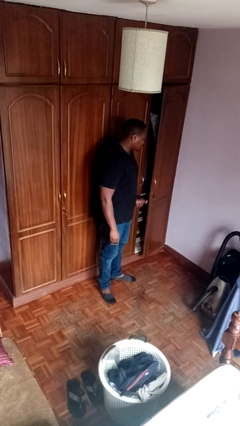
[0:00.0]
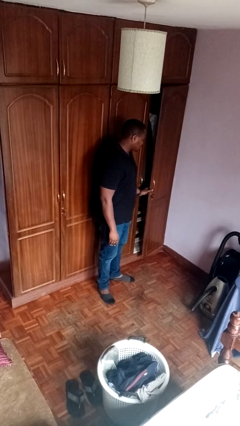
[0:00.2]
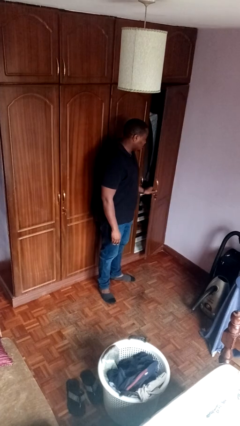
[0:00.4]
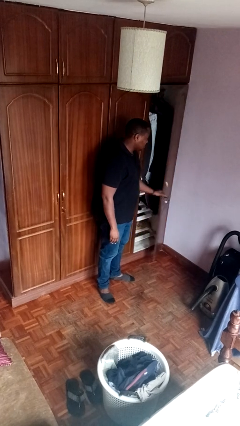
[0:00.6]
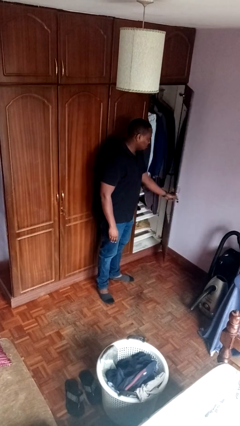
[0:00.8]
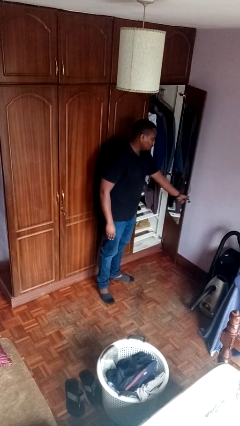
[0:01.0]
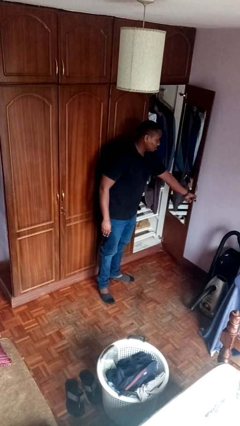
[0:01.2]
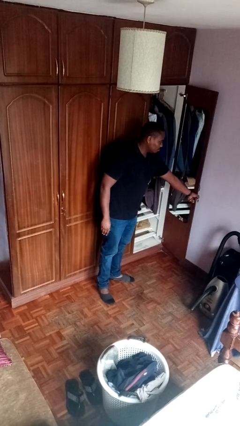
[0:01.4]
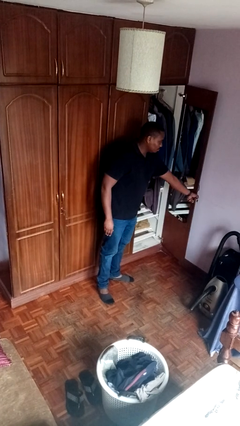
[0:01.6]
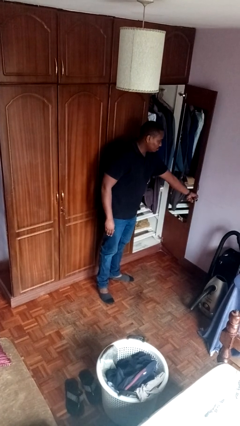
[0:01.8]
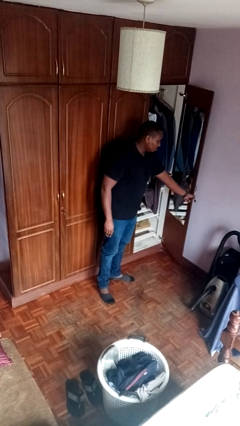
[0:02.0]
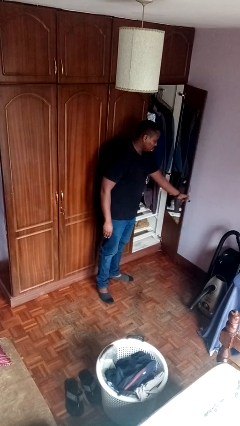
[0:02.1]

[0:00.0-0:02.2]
person opens closet door

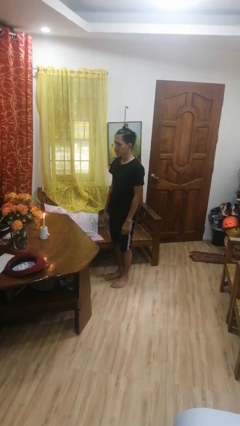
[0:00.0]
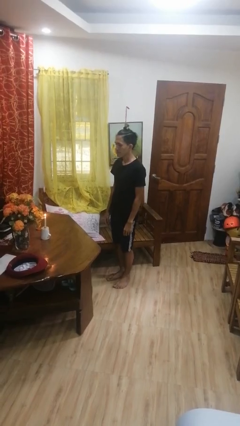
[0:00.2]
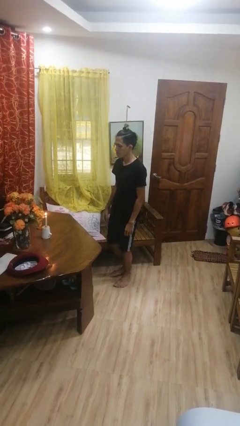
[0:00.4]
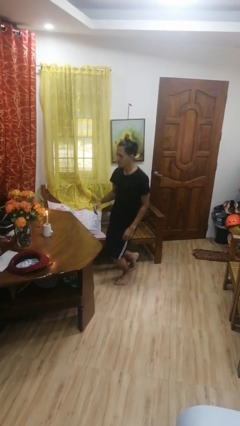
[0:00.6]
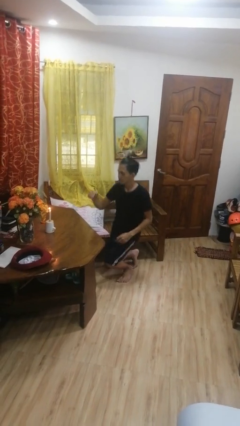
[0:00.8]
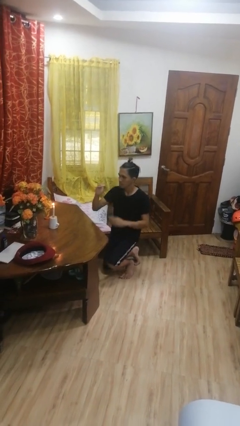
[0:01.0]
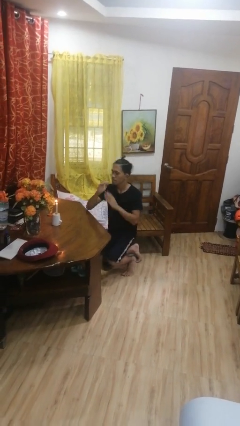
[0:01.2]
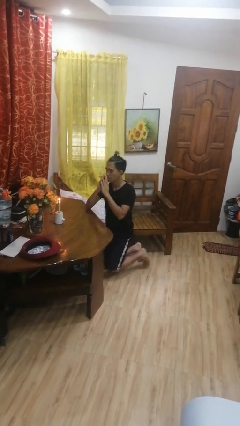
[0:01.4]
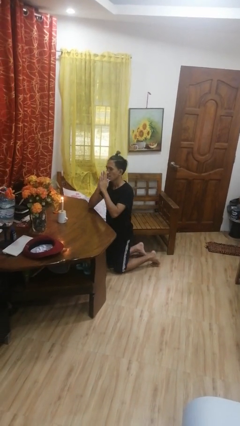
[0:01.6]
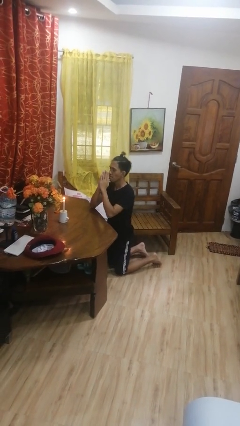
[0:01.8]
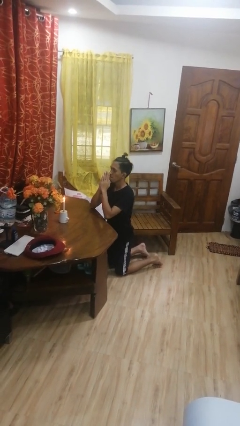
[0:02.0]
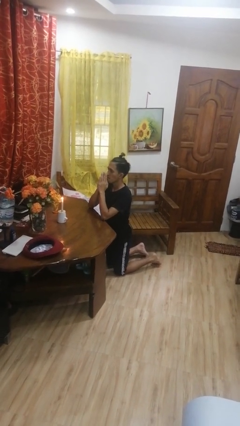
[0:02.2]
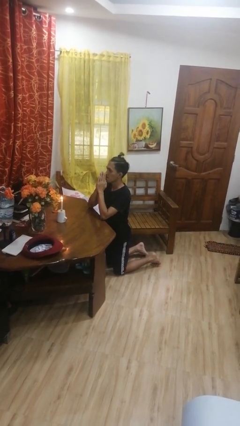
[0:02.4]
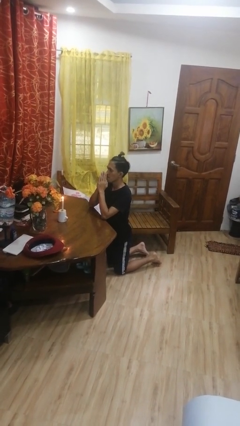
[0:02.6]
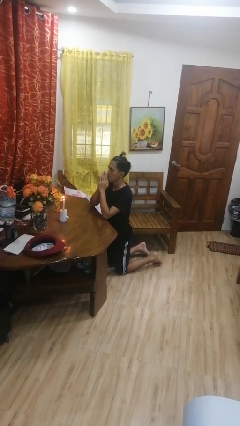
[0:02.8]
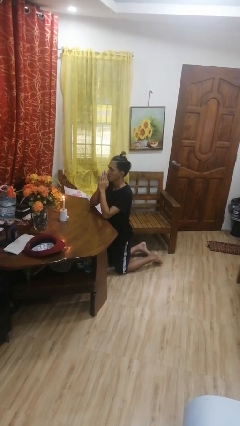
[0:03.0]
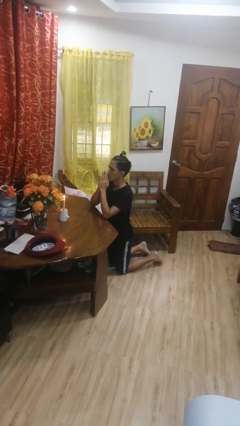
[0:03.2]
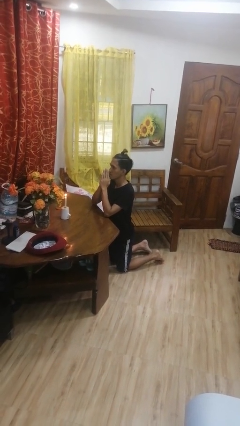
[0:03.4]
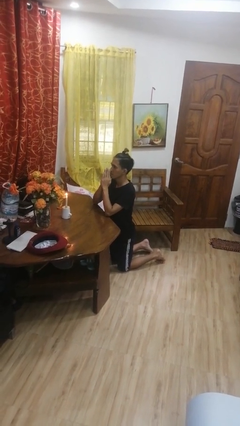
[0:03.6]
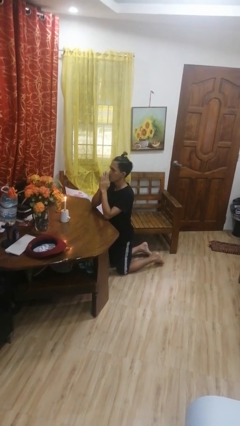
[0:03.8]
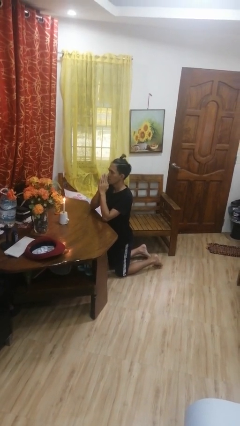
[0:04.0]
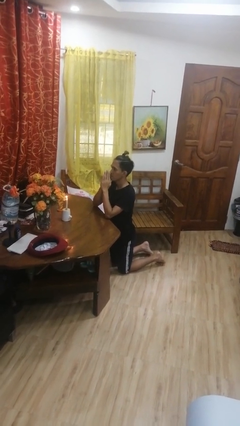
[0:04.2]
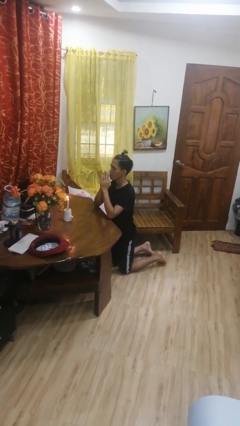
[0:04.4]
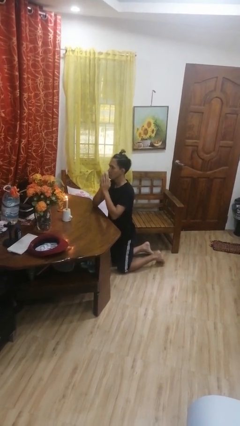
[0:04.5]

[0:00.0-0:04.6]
person prays

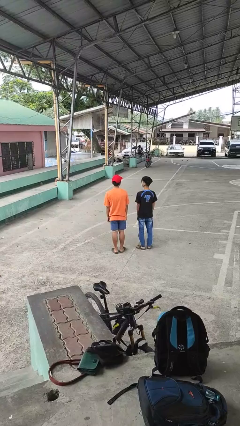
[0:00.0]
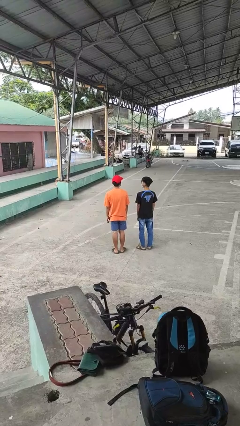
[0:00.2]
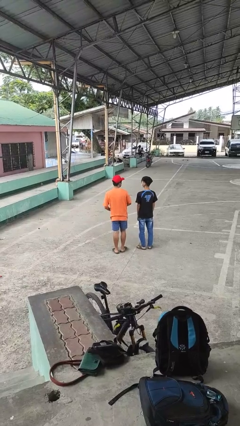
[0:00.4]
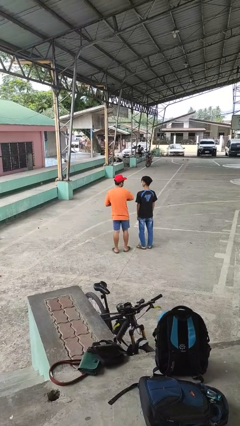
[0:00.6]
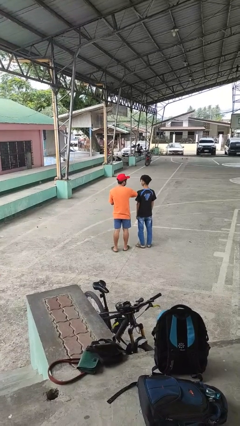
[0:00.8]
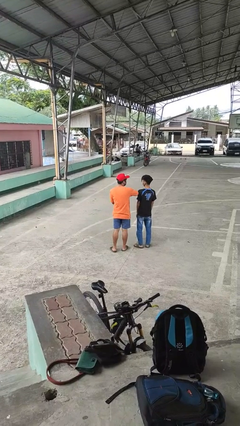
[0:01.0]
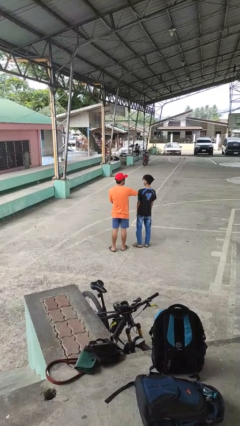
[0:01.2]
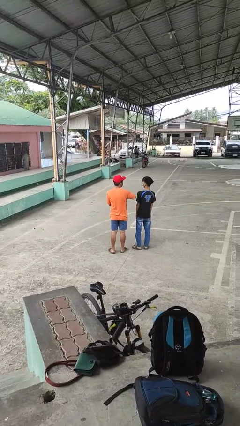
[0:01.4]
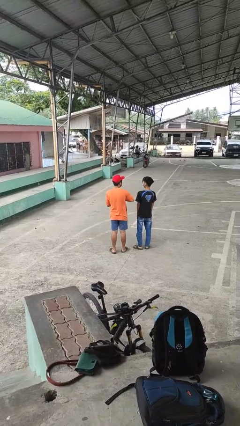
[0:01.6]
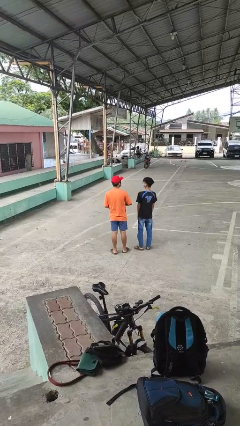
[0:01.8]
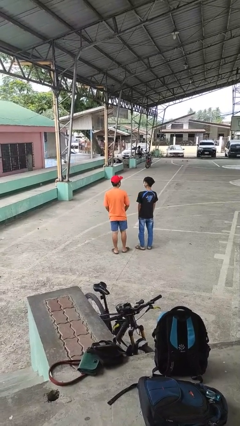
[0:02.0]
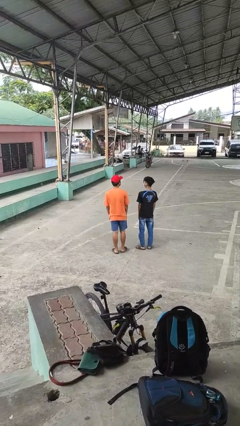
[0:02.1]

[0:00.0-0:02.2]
person nudges person with elbow

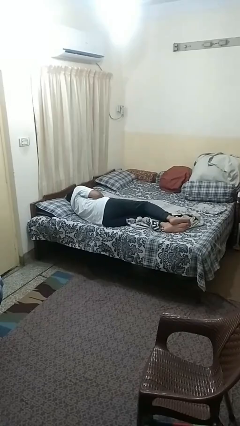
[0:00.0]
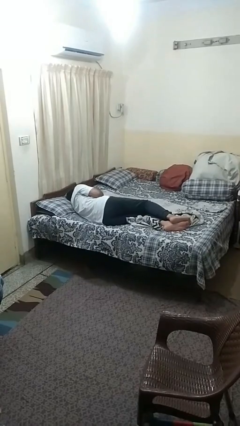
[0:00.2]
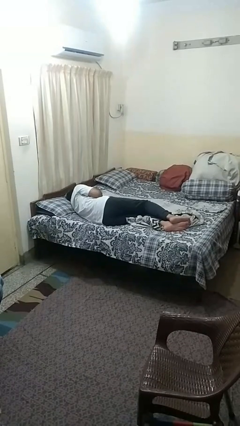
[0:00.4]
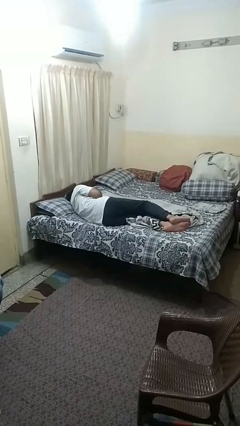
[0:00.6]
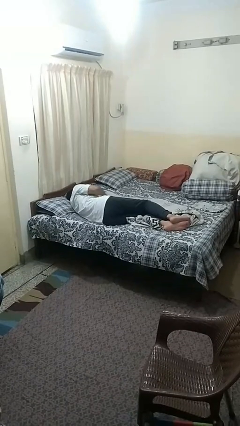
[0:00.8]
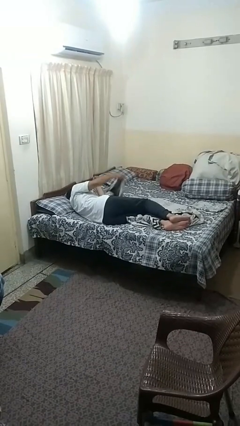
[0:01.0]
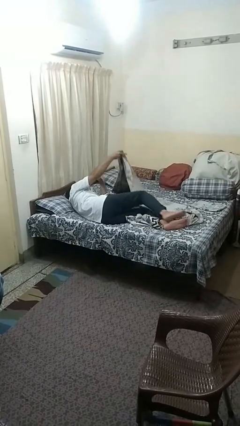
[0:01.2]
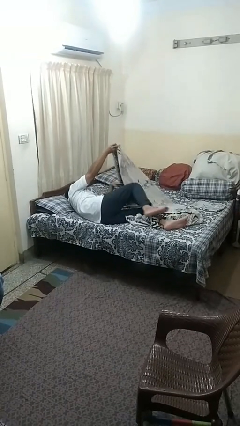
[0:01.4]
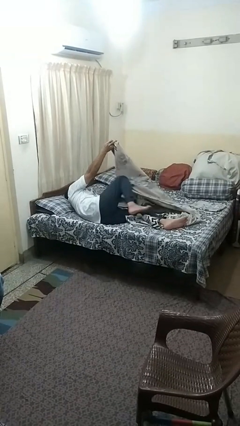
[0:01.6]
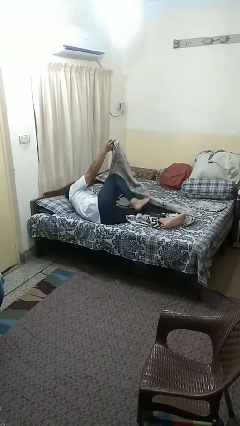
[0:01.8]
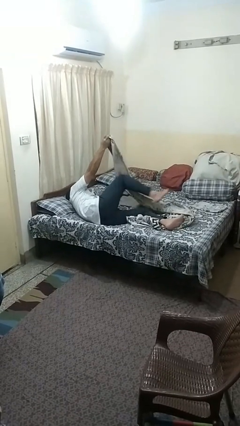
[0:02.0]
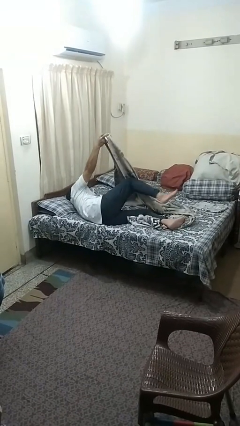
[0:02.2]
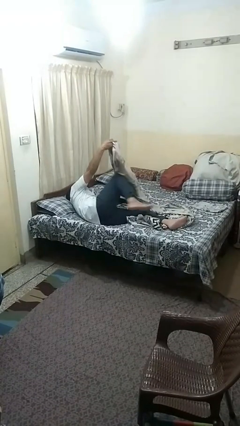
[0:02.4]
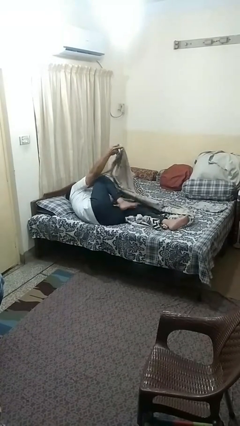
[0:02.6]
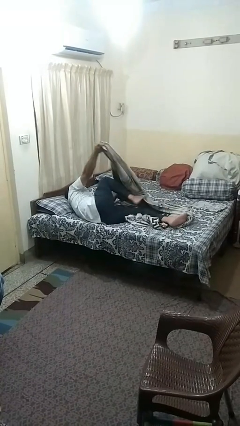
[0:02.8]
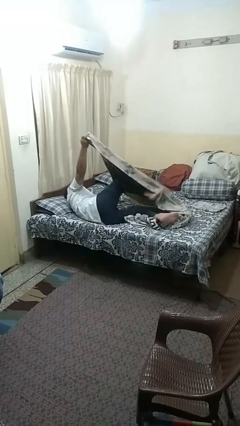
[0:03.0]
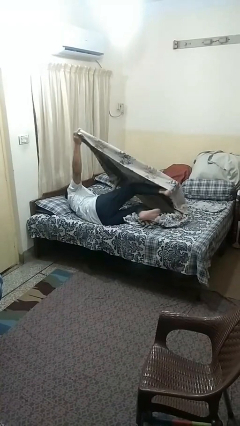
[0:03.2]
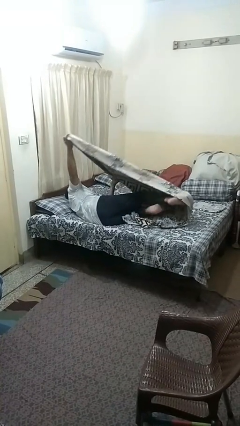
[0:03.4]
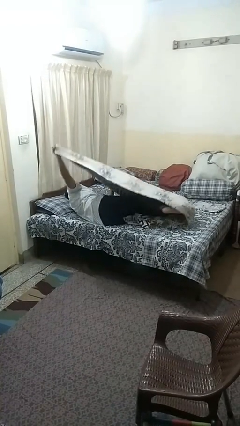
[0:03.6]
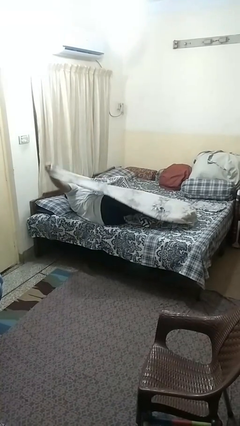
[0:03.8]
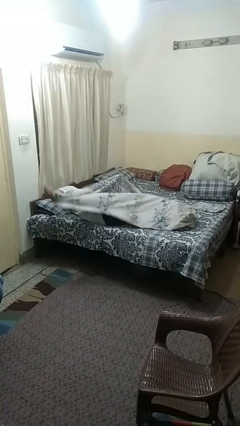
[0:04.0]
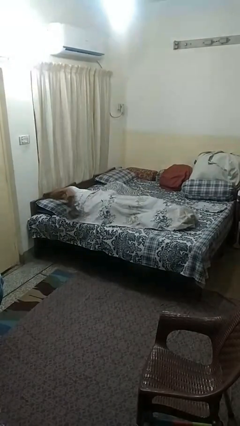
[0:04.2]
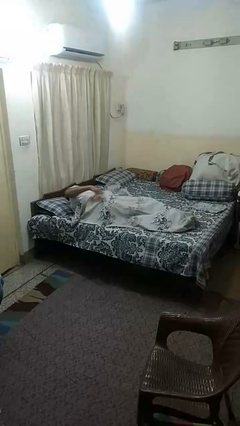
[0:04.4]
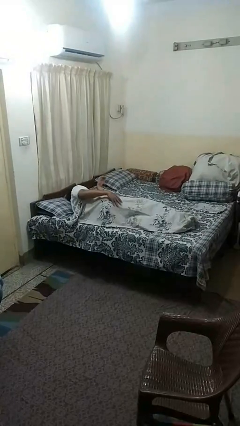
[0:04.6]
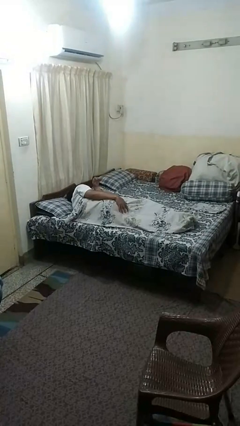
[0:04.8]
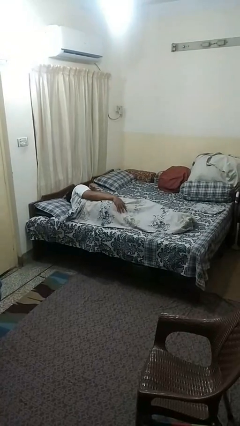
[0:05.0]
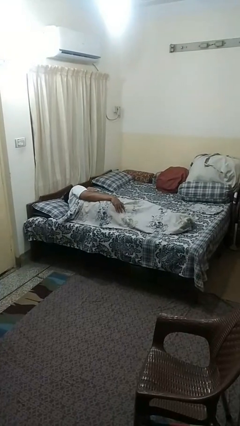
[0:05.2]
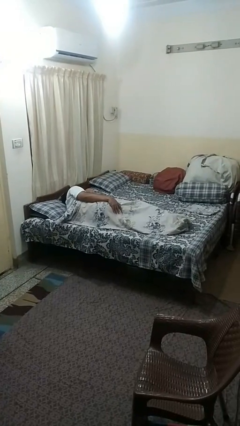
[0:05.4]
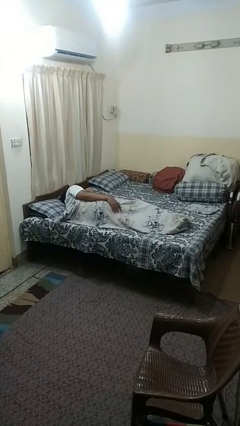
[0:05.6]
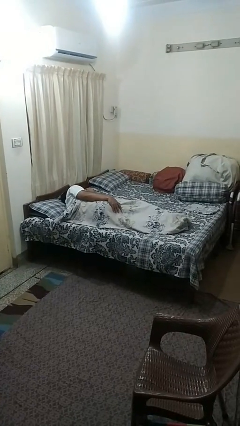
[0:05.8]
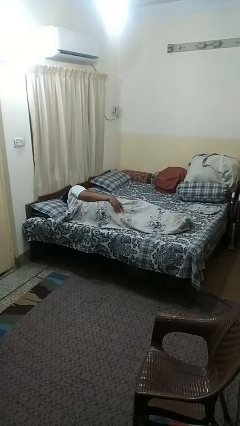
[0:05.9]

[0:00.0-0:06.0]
person covers with bedsheets

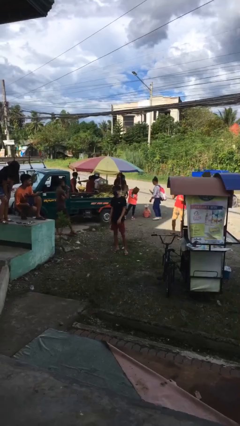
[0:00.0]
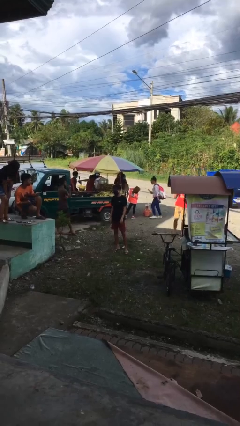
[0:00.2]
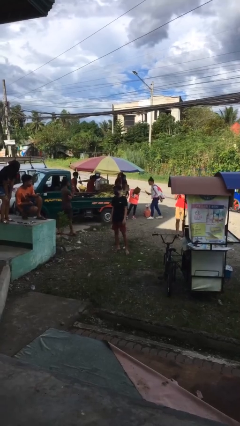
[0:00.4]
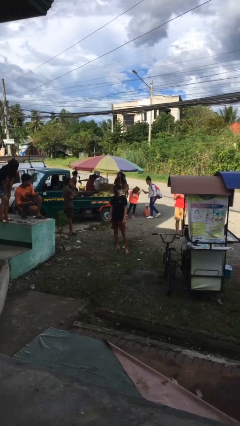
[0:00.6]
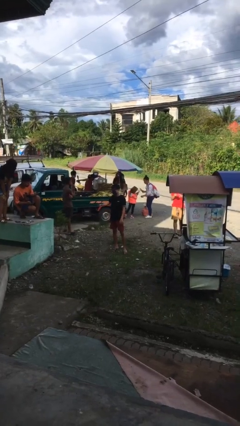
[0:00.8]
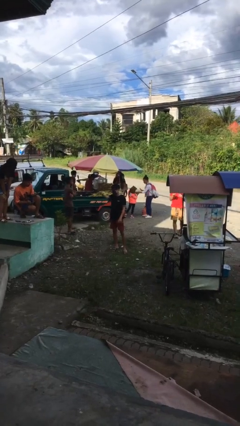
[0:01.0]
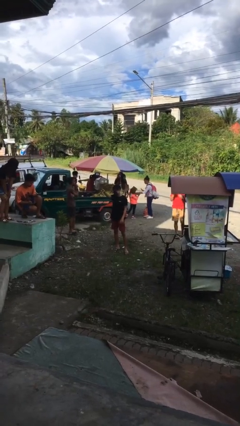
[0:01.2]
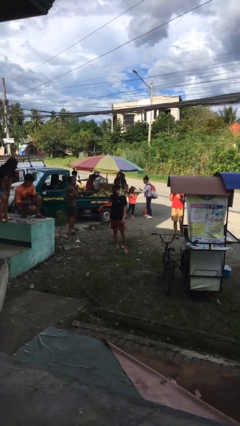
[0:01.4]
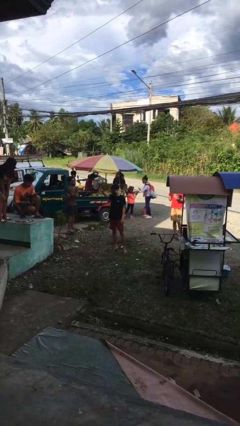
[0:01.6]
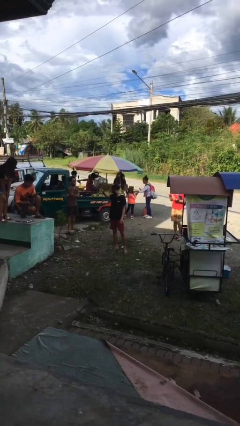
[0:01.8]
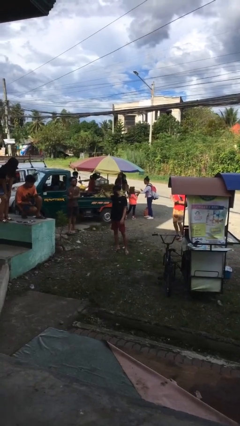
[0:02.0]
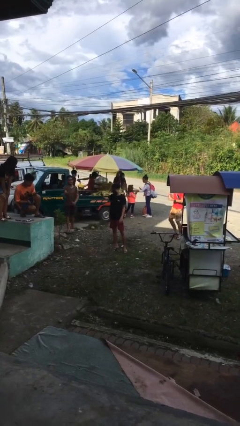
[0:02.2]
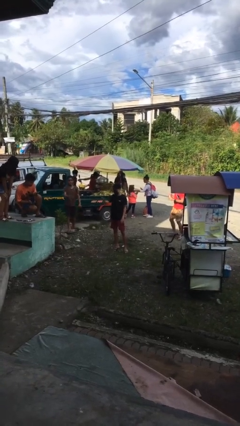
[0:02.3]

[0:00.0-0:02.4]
person points at person

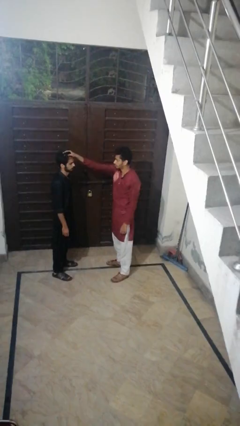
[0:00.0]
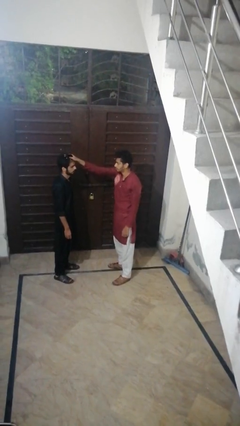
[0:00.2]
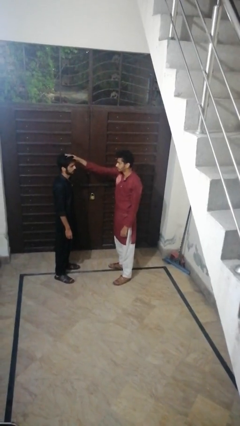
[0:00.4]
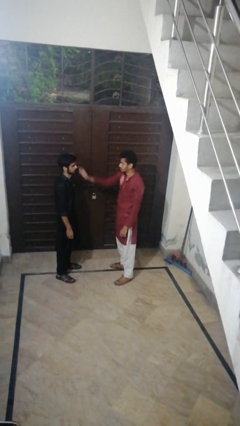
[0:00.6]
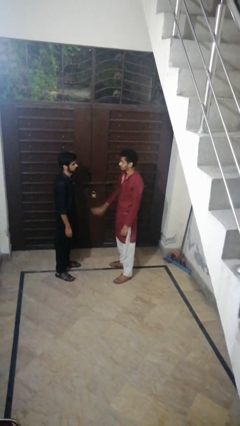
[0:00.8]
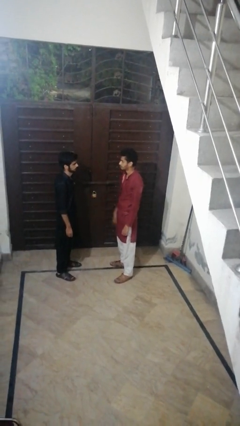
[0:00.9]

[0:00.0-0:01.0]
person grabs person by hair
